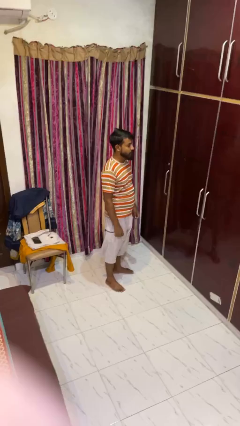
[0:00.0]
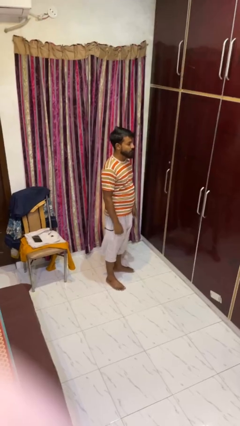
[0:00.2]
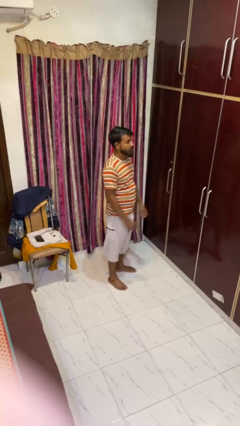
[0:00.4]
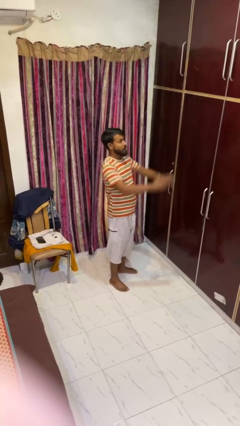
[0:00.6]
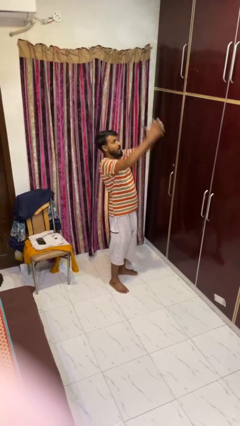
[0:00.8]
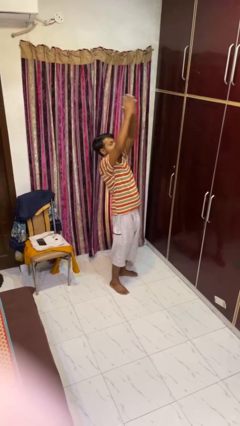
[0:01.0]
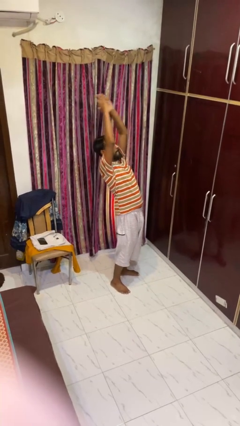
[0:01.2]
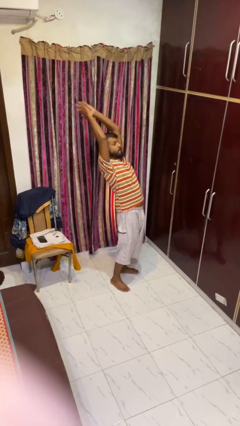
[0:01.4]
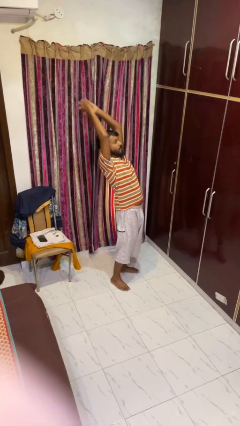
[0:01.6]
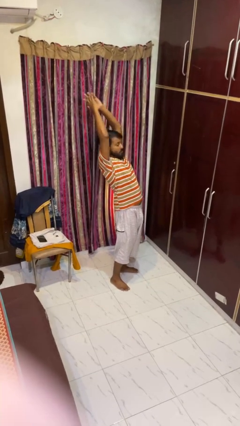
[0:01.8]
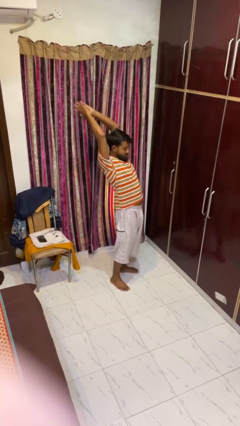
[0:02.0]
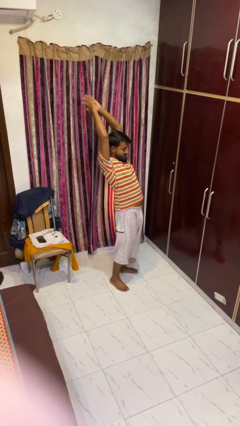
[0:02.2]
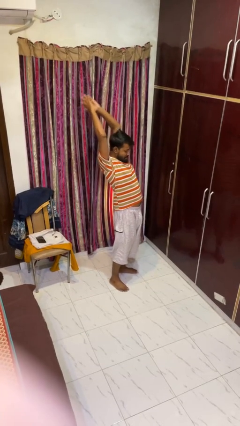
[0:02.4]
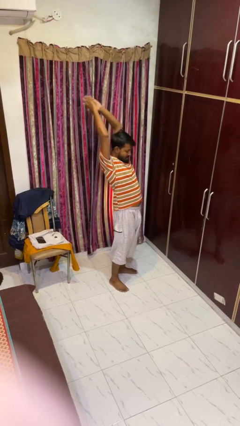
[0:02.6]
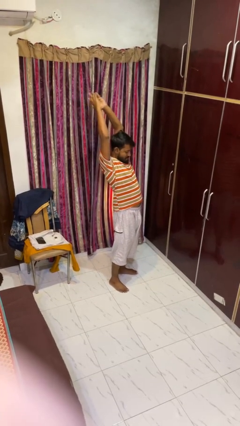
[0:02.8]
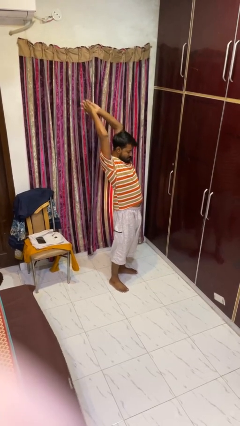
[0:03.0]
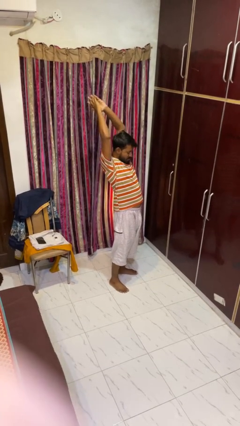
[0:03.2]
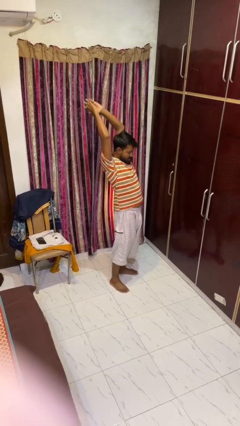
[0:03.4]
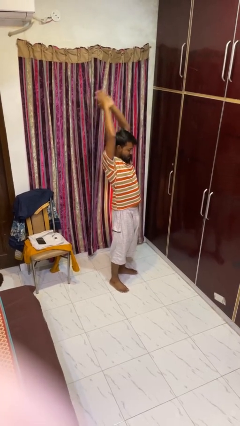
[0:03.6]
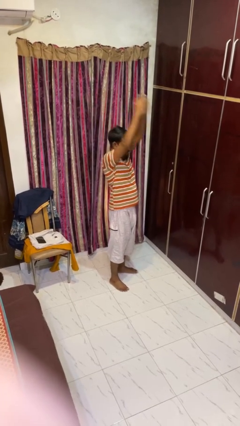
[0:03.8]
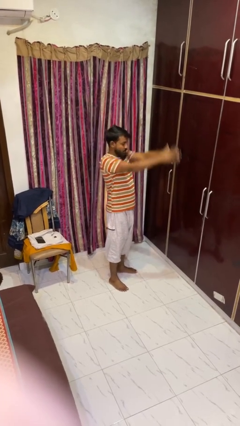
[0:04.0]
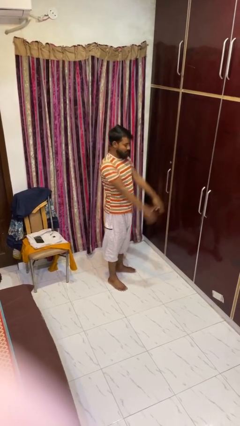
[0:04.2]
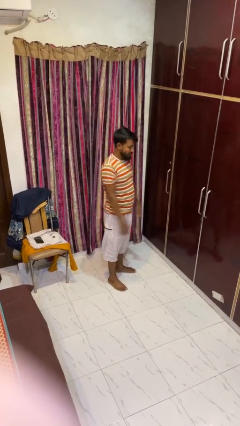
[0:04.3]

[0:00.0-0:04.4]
person stretches arms over head

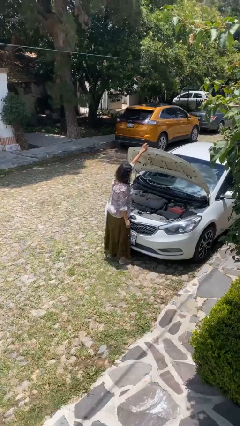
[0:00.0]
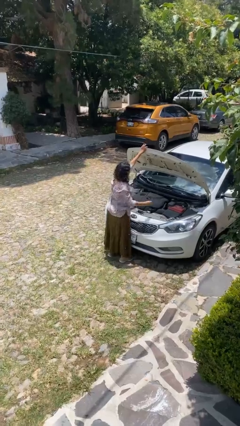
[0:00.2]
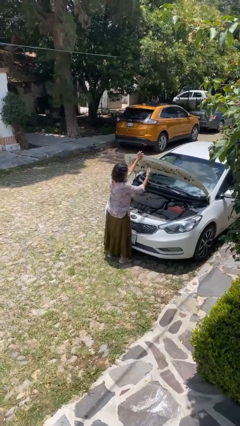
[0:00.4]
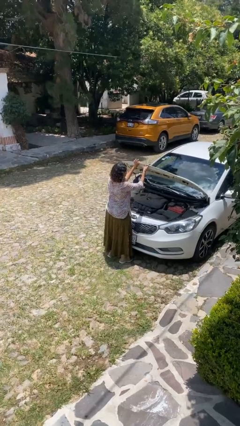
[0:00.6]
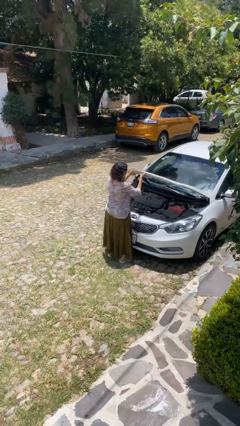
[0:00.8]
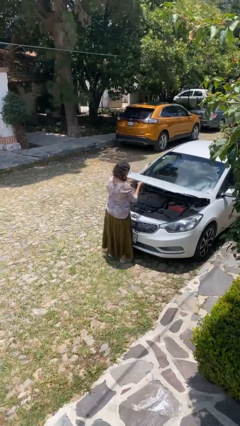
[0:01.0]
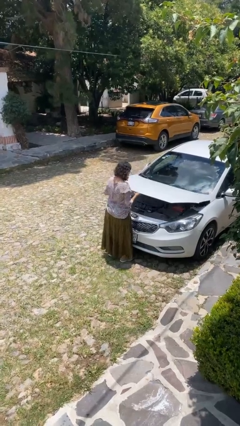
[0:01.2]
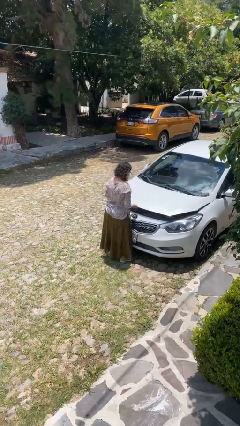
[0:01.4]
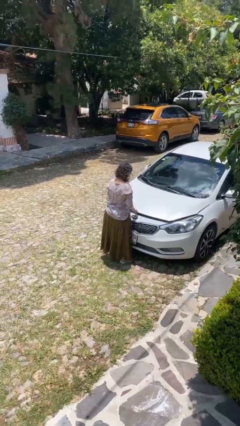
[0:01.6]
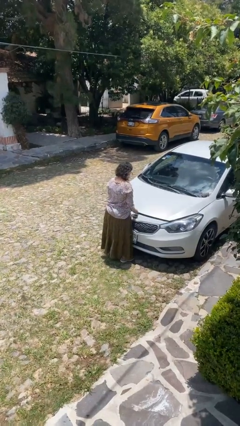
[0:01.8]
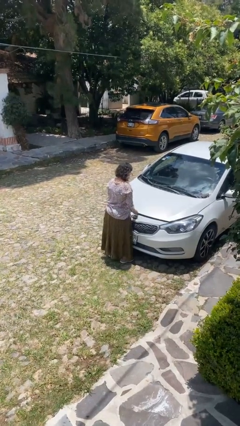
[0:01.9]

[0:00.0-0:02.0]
person closes car hood

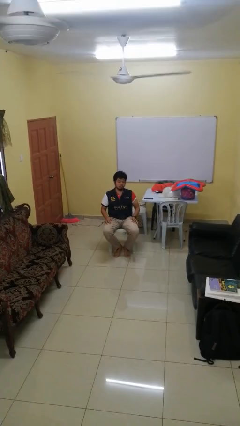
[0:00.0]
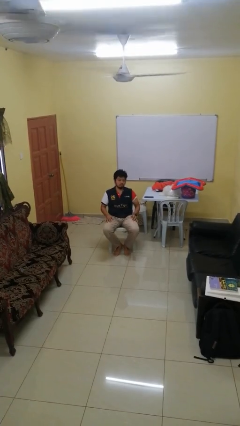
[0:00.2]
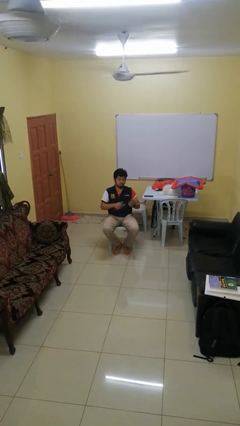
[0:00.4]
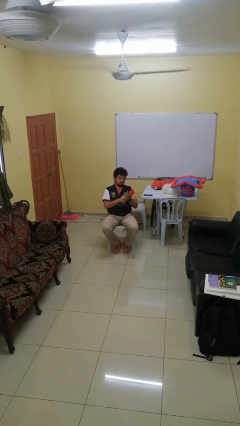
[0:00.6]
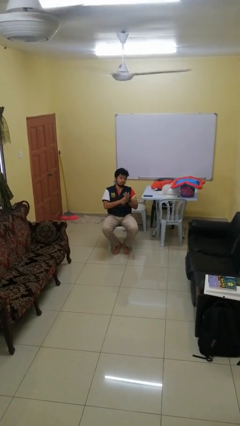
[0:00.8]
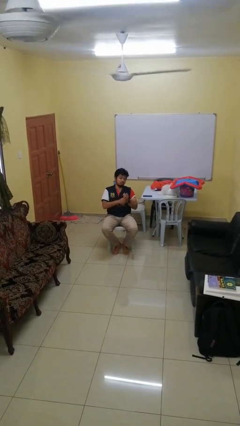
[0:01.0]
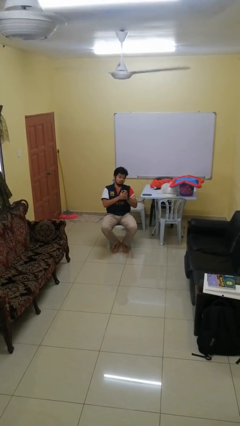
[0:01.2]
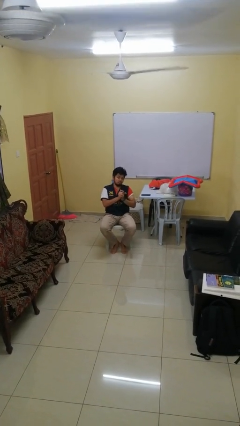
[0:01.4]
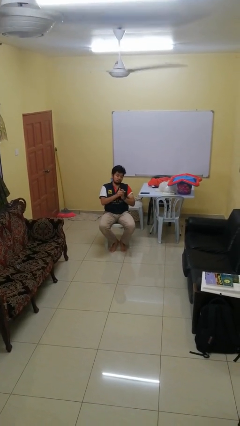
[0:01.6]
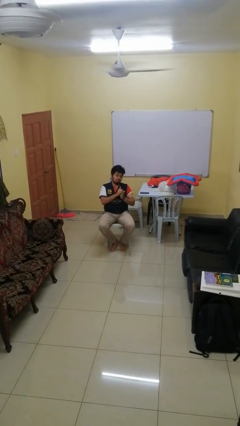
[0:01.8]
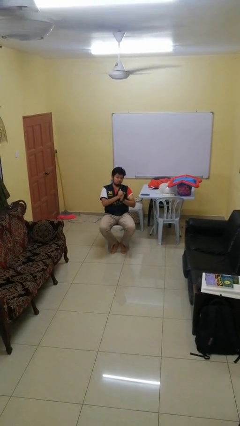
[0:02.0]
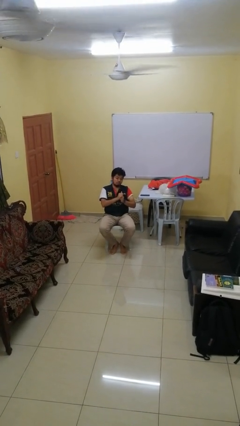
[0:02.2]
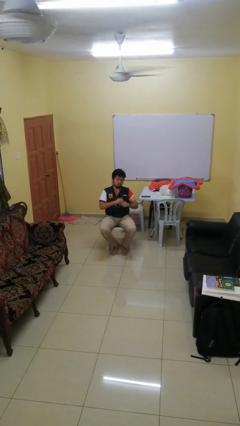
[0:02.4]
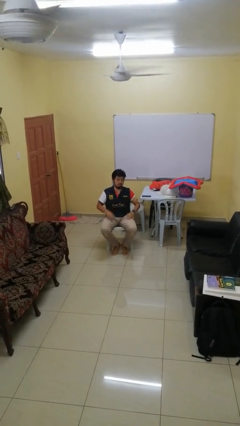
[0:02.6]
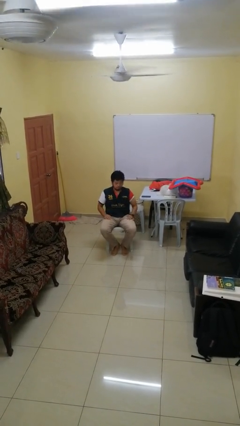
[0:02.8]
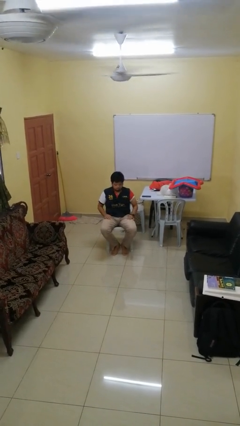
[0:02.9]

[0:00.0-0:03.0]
person cracks knuckles

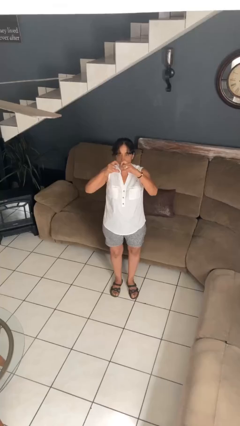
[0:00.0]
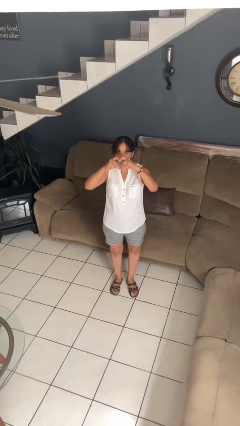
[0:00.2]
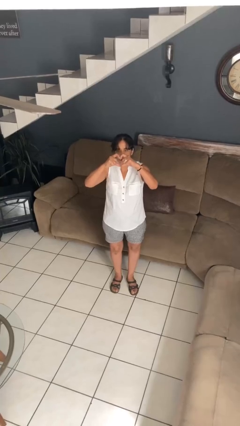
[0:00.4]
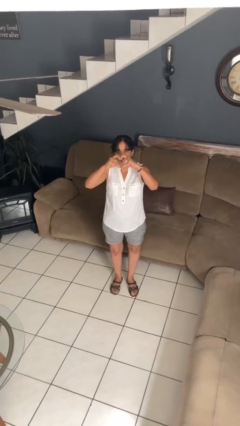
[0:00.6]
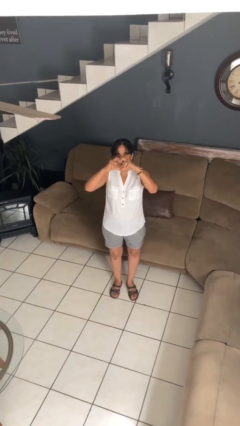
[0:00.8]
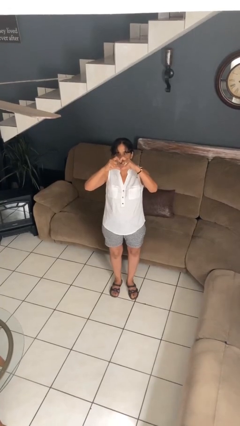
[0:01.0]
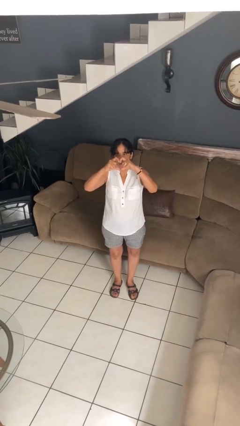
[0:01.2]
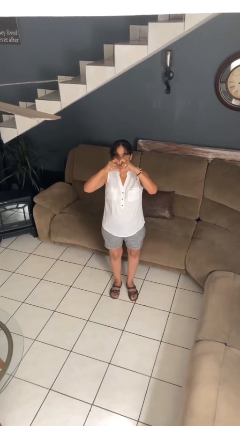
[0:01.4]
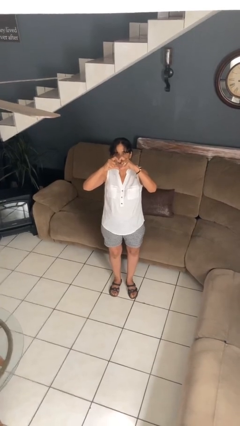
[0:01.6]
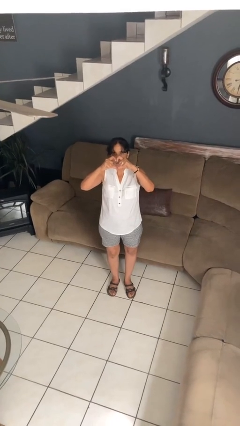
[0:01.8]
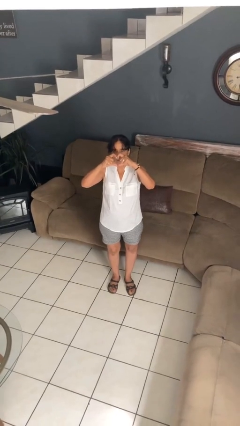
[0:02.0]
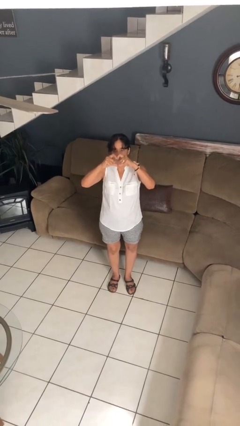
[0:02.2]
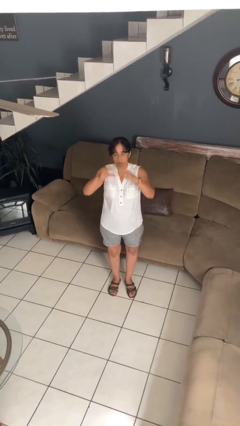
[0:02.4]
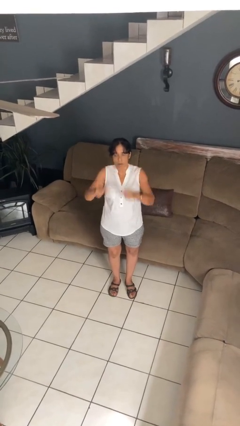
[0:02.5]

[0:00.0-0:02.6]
person gestures heart

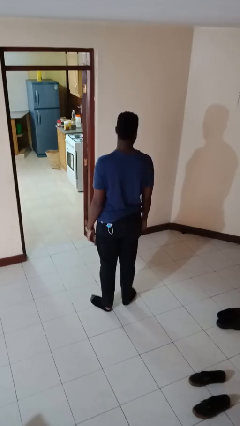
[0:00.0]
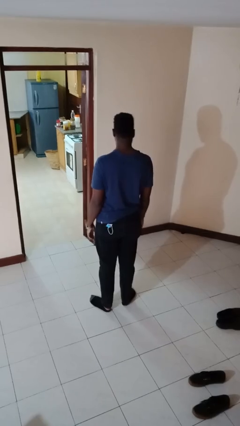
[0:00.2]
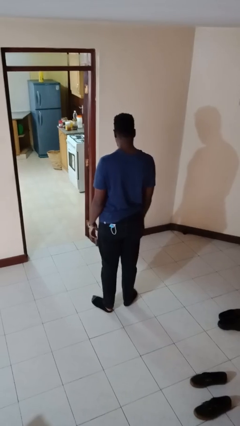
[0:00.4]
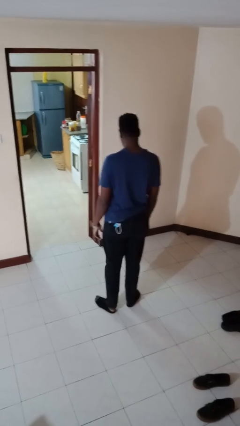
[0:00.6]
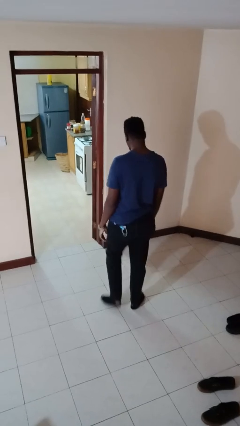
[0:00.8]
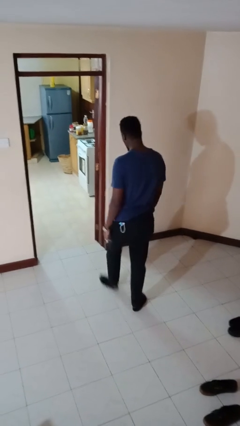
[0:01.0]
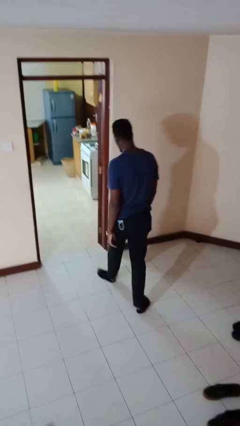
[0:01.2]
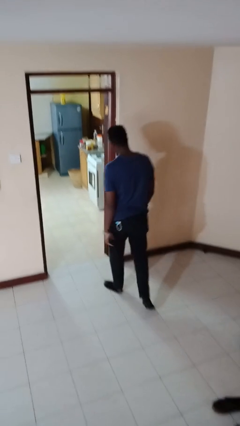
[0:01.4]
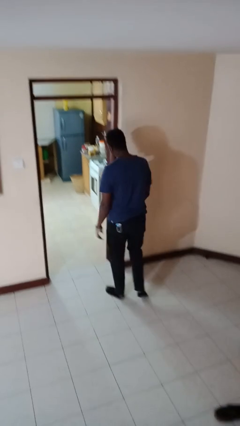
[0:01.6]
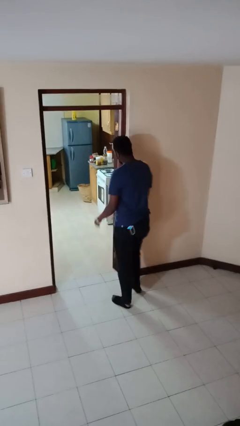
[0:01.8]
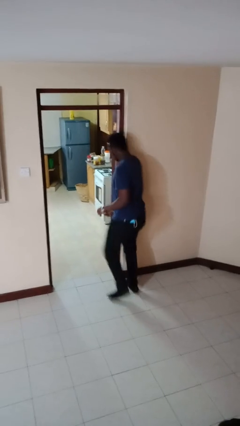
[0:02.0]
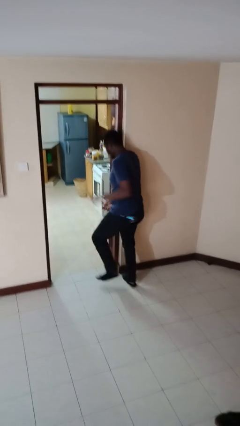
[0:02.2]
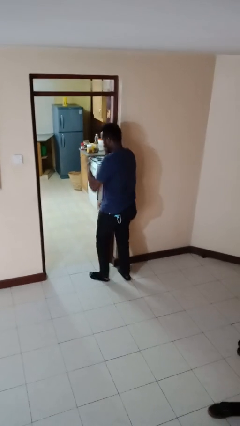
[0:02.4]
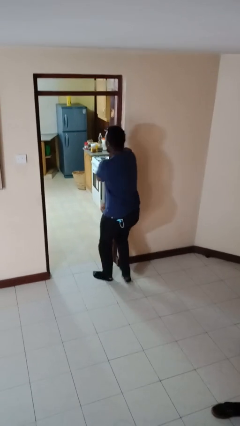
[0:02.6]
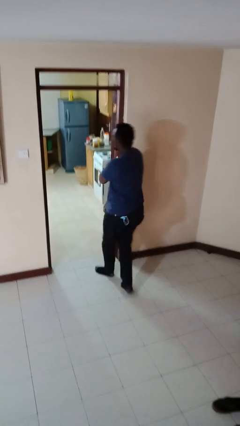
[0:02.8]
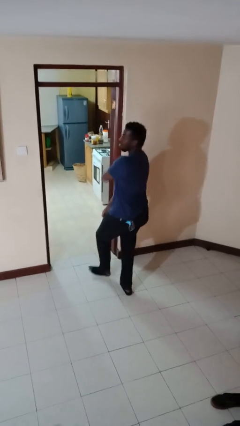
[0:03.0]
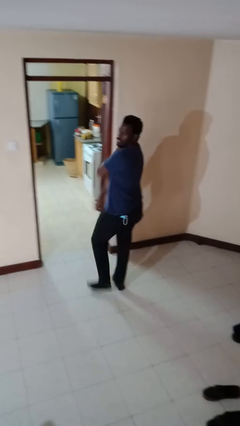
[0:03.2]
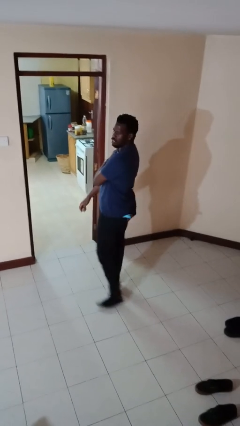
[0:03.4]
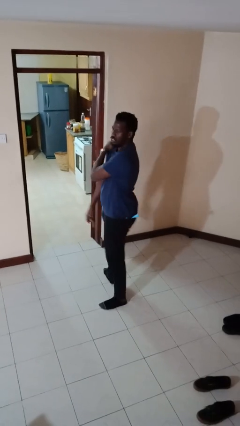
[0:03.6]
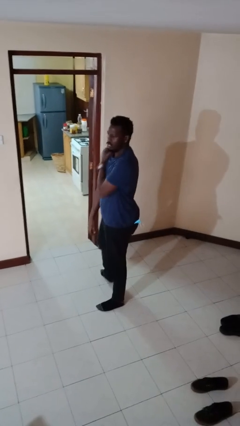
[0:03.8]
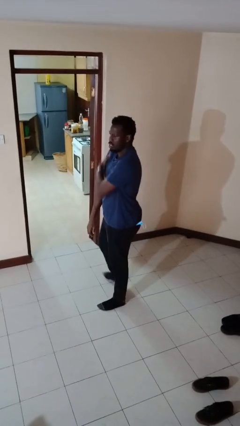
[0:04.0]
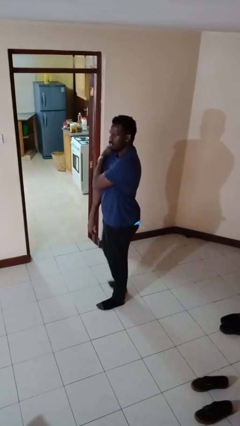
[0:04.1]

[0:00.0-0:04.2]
person bumps into wall

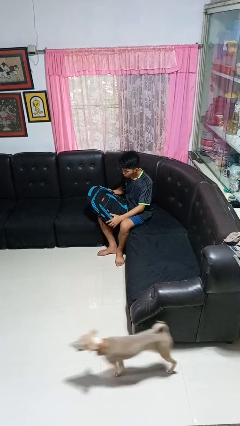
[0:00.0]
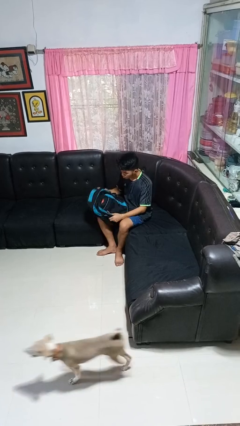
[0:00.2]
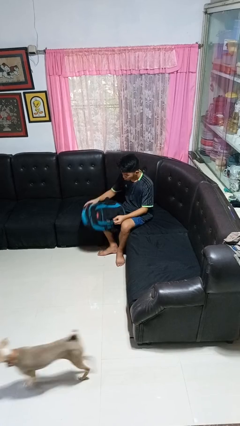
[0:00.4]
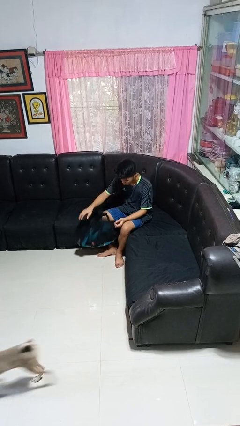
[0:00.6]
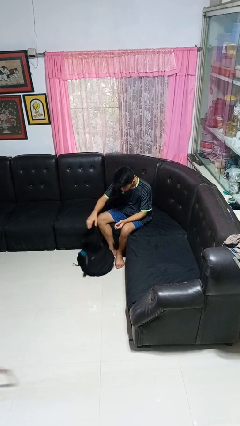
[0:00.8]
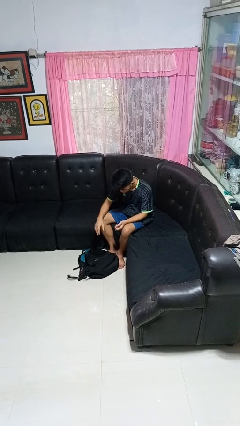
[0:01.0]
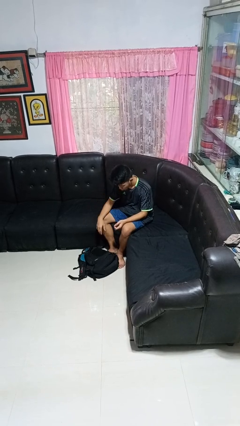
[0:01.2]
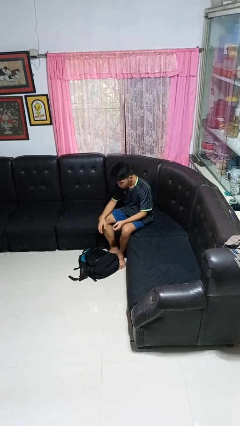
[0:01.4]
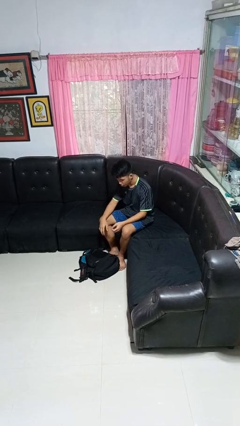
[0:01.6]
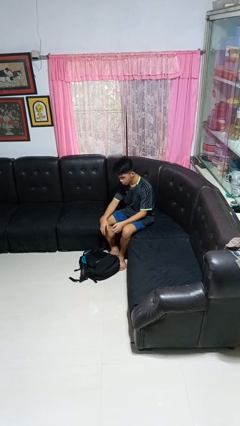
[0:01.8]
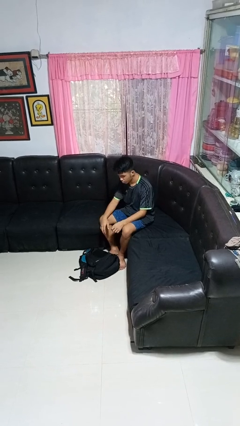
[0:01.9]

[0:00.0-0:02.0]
person drops object
